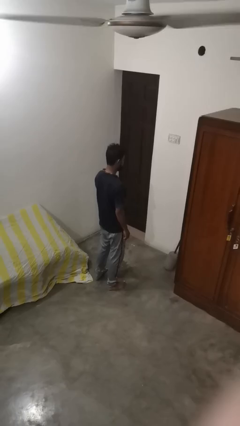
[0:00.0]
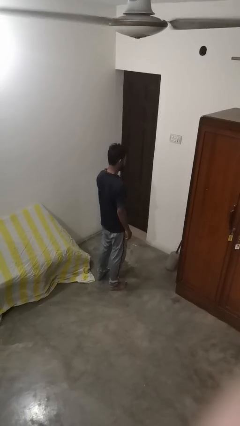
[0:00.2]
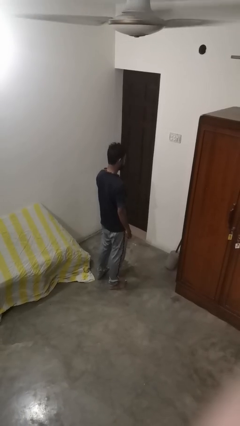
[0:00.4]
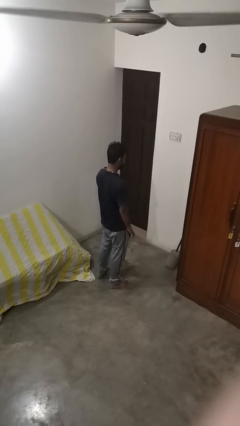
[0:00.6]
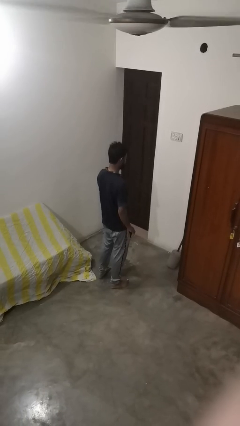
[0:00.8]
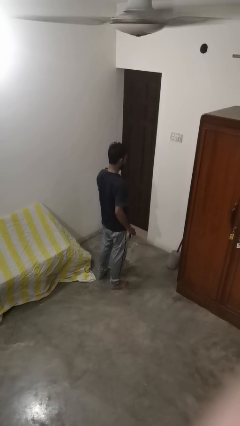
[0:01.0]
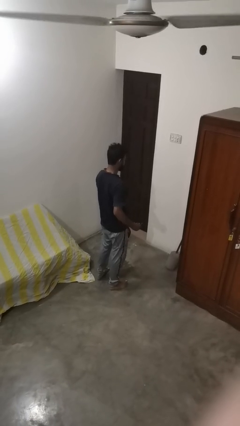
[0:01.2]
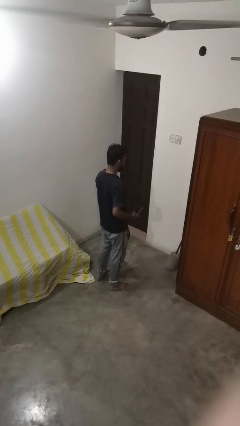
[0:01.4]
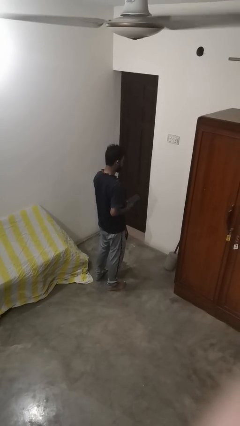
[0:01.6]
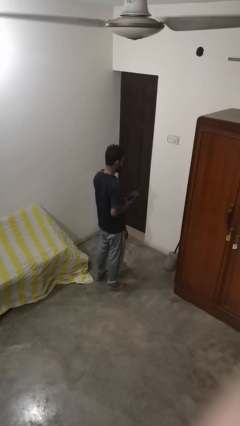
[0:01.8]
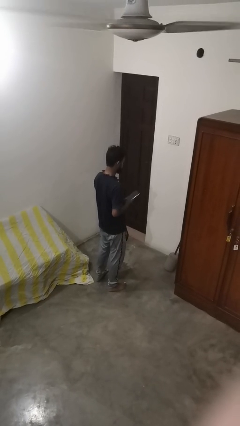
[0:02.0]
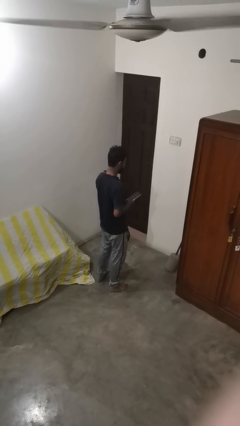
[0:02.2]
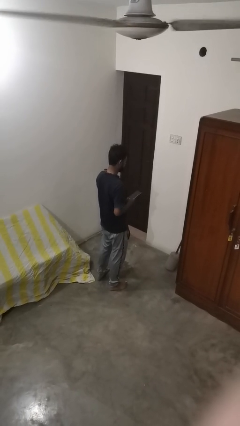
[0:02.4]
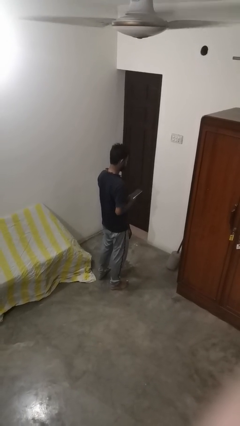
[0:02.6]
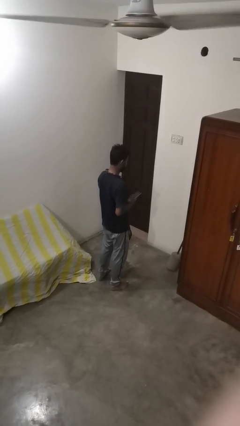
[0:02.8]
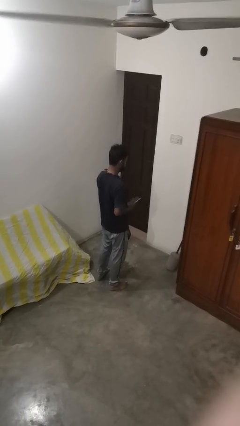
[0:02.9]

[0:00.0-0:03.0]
person takes phone from pocket

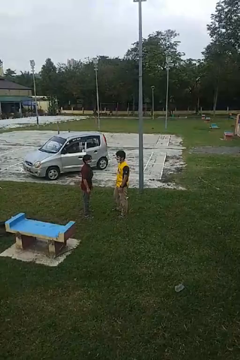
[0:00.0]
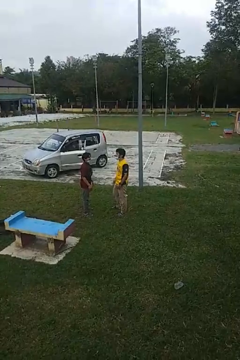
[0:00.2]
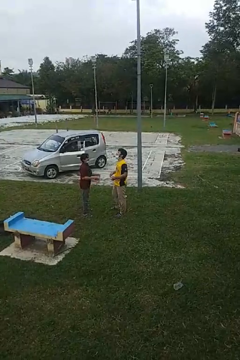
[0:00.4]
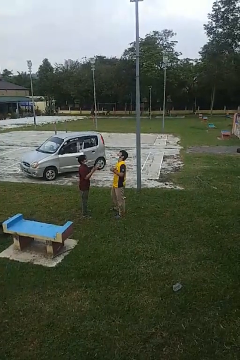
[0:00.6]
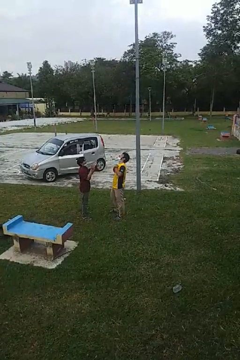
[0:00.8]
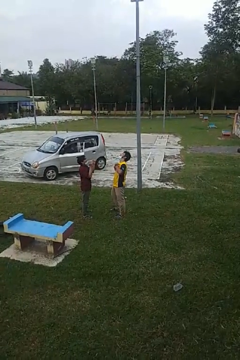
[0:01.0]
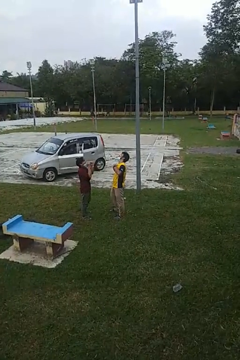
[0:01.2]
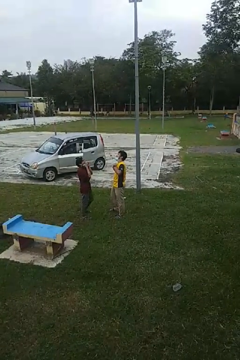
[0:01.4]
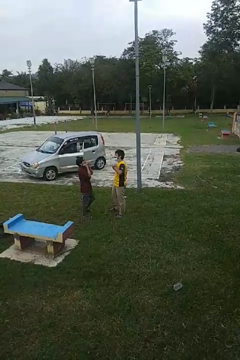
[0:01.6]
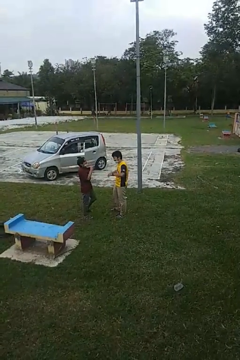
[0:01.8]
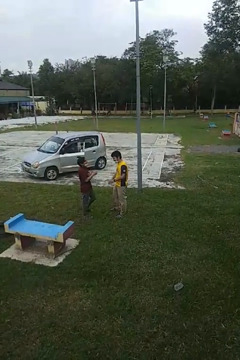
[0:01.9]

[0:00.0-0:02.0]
person laughs with person

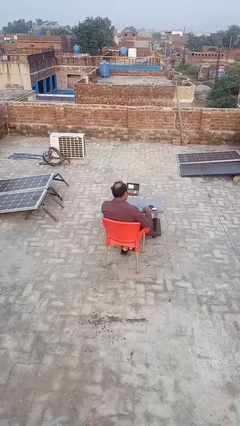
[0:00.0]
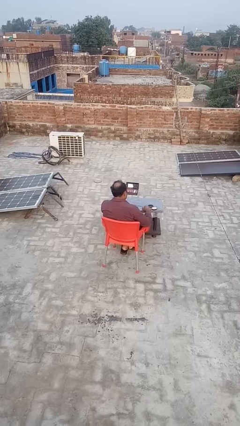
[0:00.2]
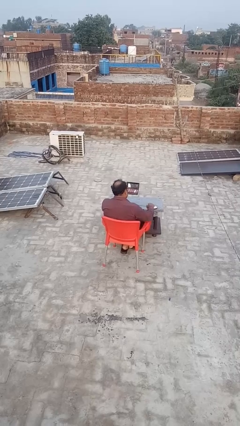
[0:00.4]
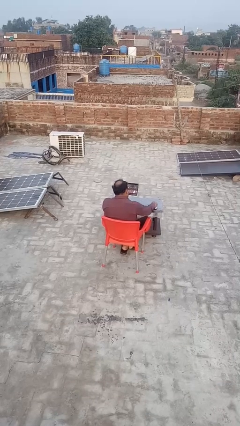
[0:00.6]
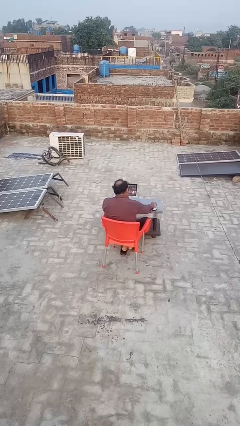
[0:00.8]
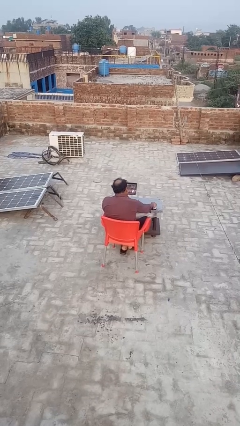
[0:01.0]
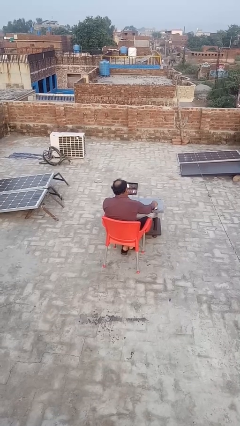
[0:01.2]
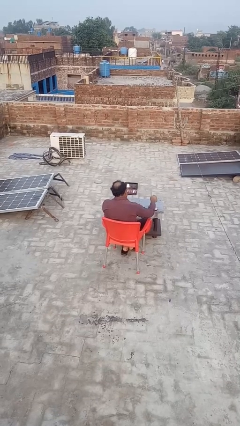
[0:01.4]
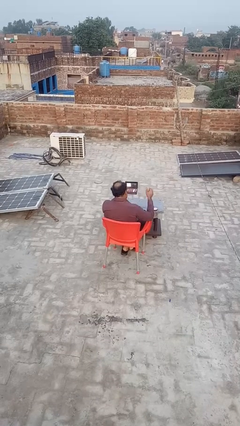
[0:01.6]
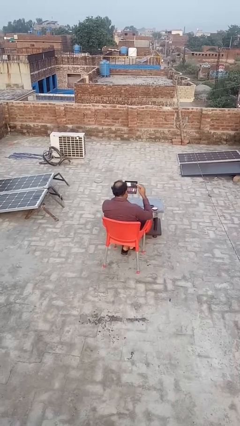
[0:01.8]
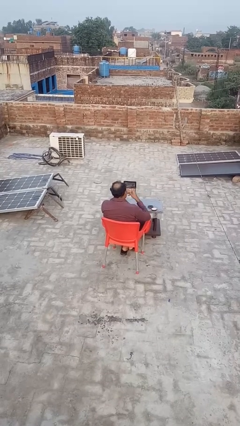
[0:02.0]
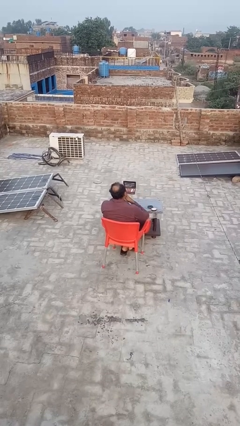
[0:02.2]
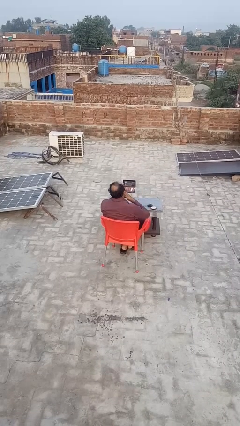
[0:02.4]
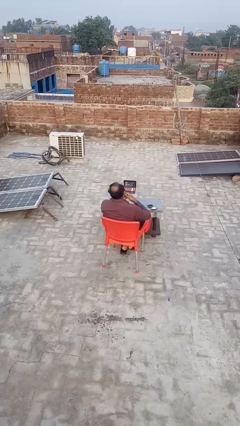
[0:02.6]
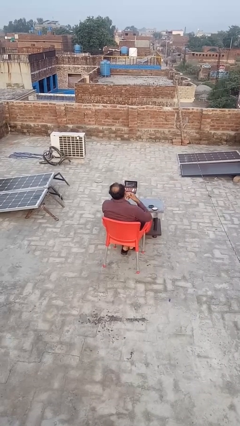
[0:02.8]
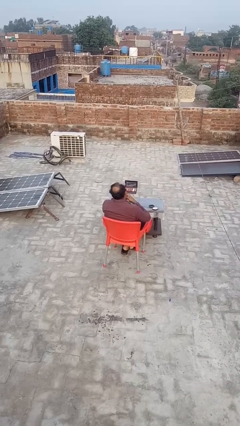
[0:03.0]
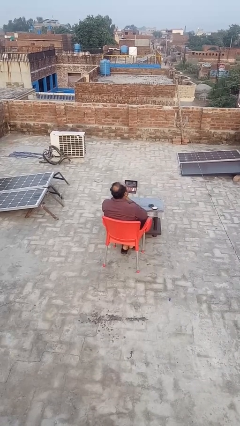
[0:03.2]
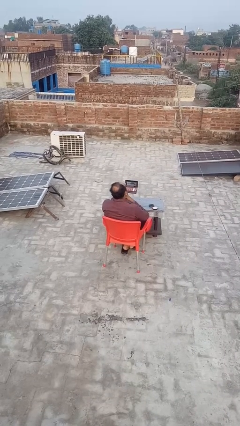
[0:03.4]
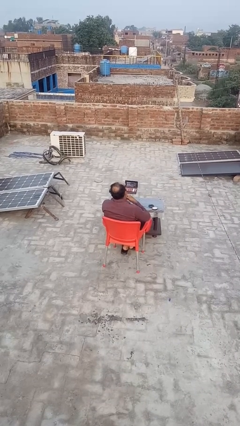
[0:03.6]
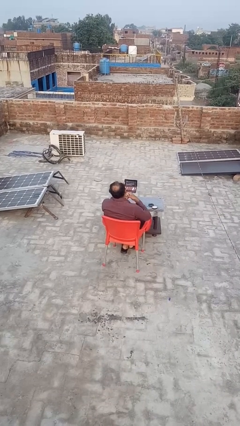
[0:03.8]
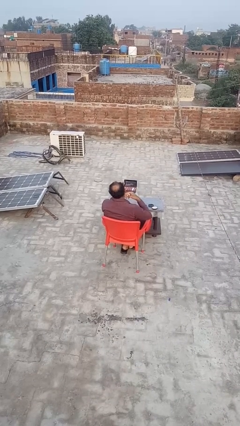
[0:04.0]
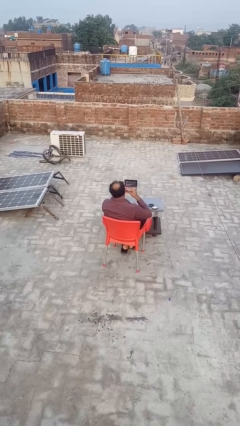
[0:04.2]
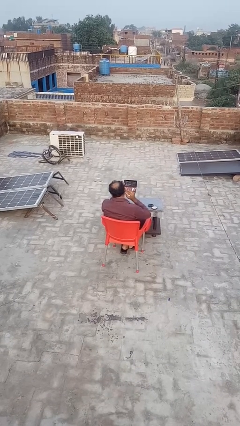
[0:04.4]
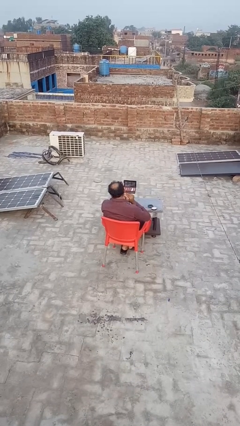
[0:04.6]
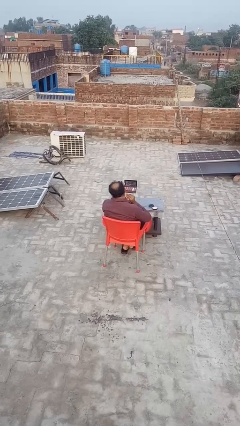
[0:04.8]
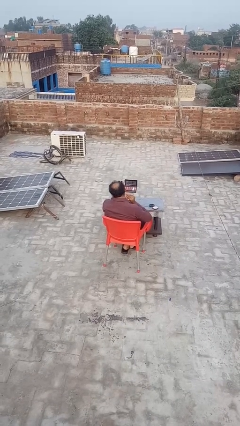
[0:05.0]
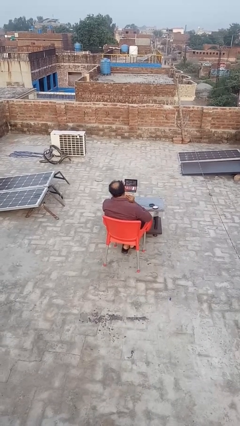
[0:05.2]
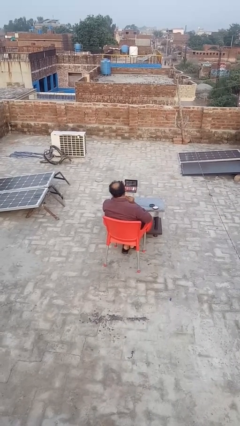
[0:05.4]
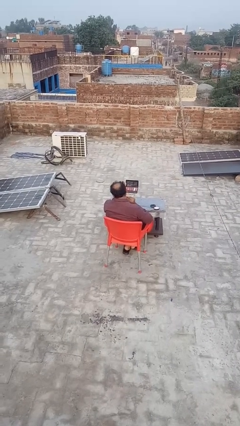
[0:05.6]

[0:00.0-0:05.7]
person applies foundation makeup

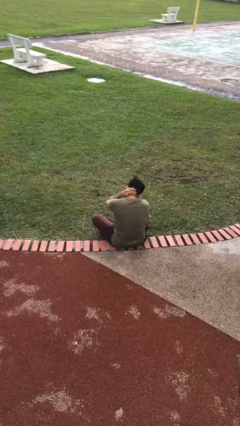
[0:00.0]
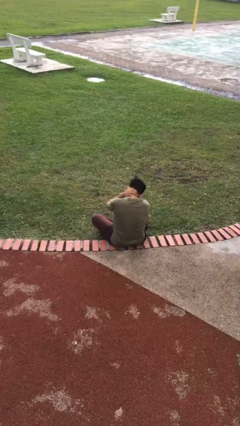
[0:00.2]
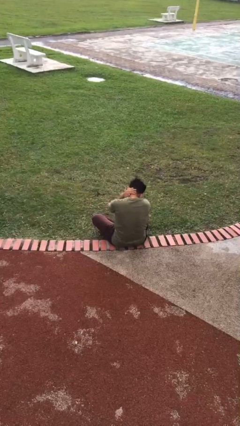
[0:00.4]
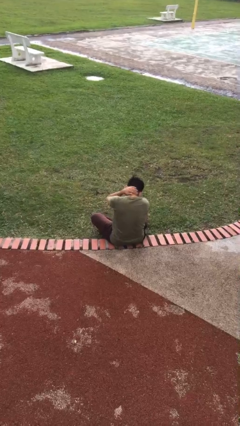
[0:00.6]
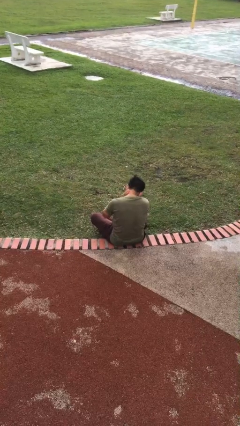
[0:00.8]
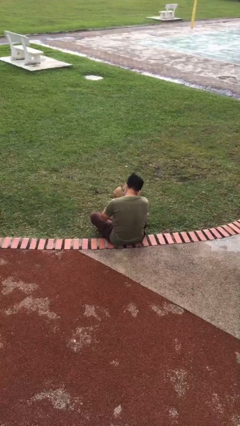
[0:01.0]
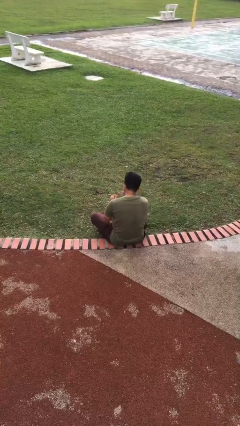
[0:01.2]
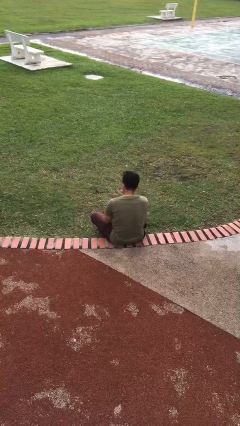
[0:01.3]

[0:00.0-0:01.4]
person rubs neck

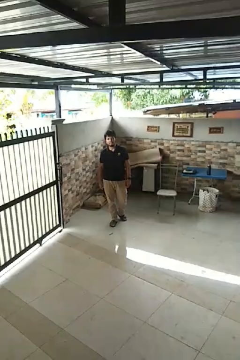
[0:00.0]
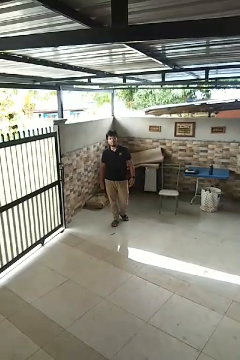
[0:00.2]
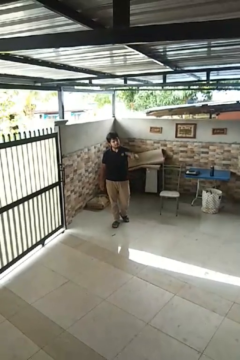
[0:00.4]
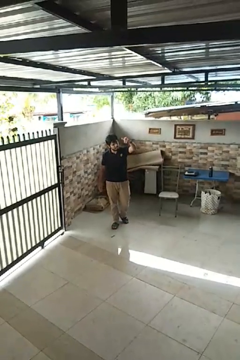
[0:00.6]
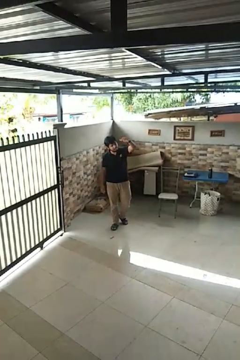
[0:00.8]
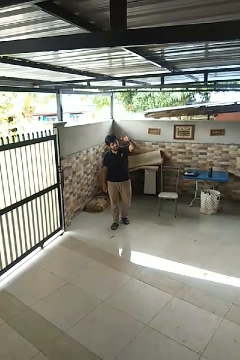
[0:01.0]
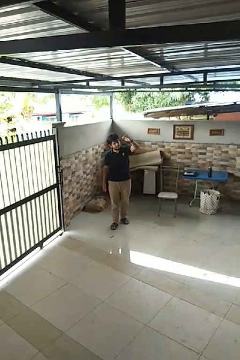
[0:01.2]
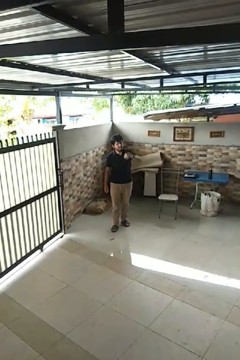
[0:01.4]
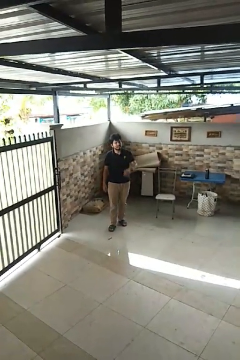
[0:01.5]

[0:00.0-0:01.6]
person gestures come here

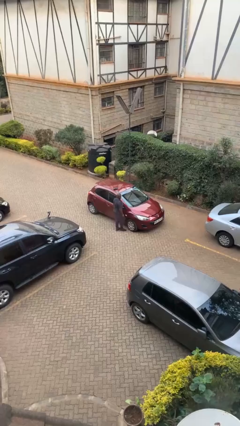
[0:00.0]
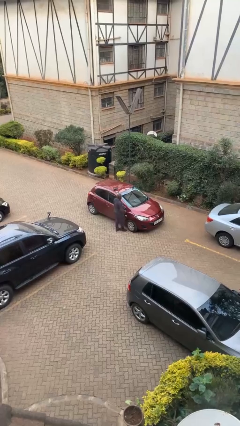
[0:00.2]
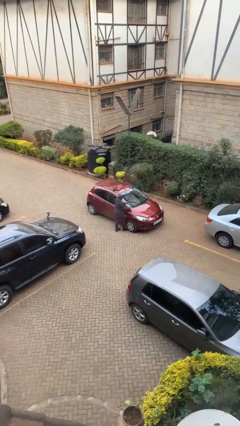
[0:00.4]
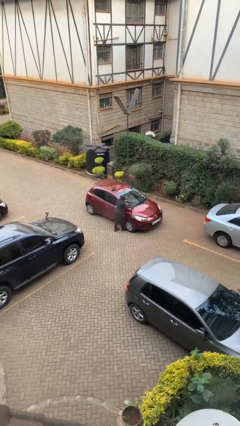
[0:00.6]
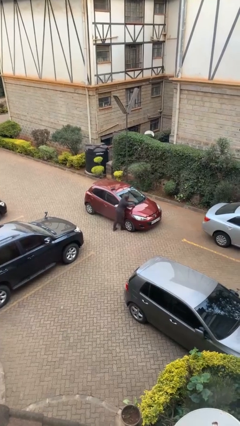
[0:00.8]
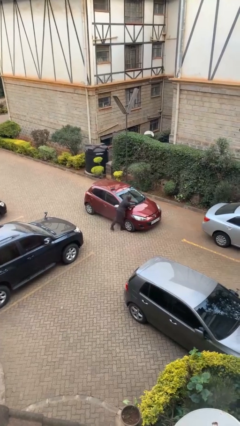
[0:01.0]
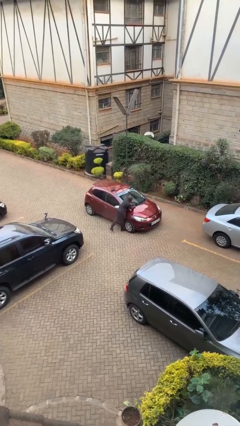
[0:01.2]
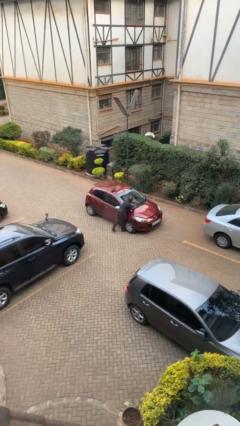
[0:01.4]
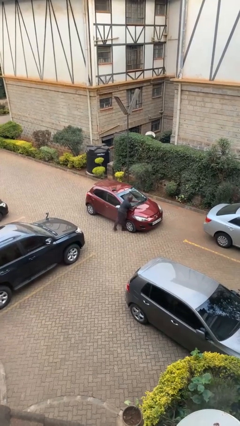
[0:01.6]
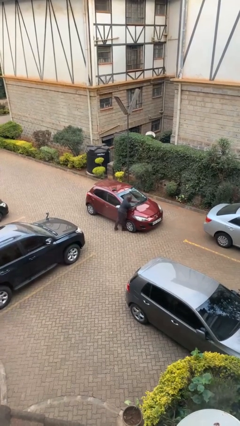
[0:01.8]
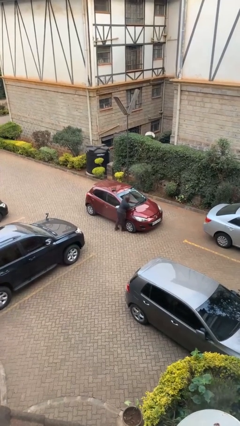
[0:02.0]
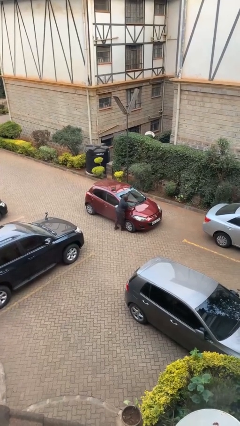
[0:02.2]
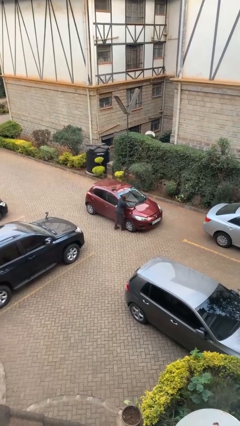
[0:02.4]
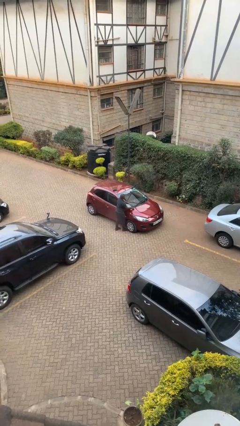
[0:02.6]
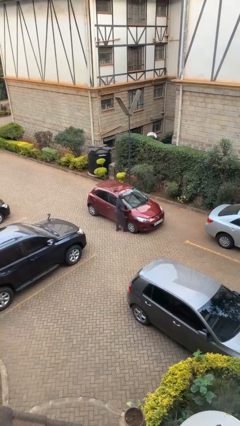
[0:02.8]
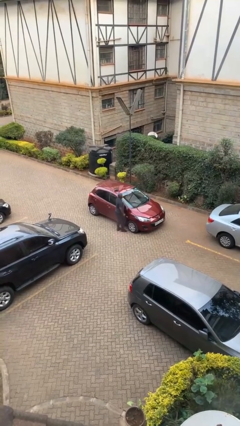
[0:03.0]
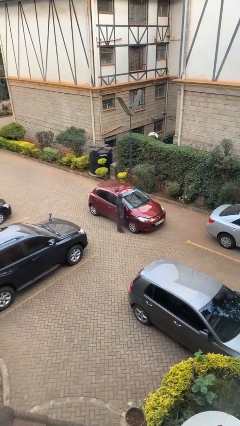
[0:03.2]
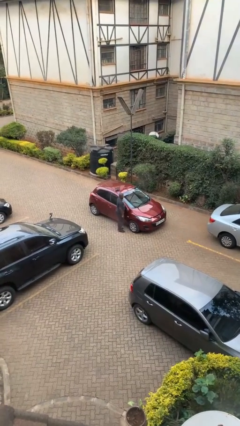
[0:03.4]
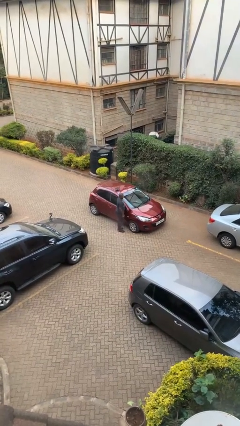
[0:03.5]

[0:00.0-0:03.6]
person flips up car wipers

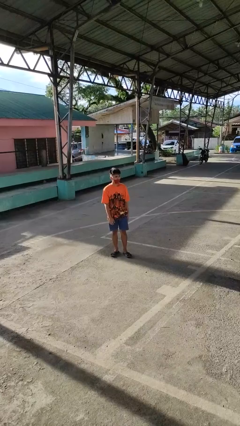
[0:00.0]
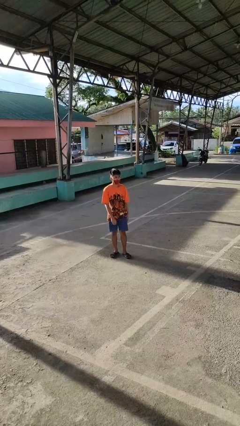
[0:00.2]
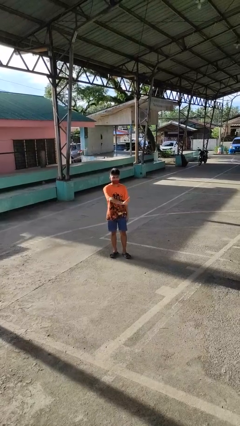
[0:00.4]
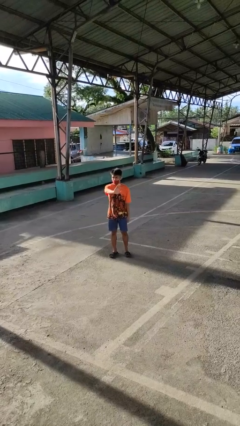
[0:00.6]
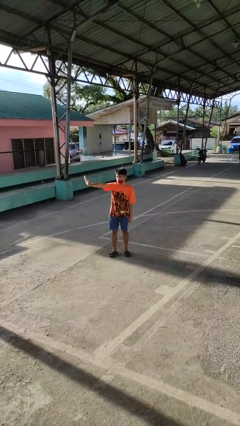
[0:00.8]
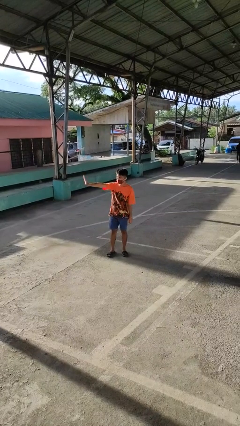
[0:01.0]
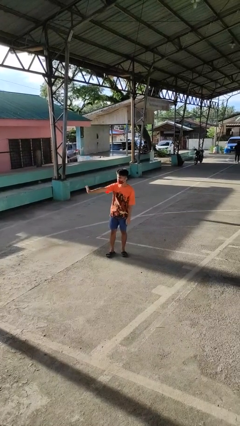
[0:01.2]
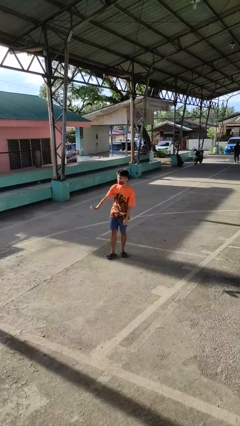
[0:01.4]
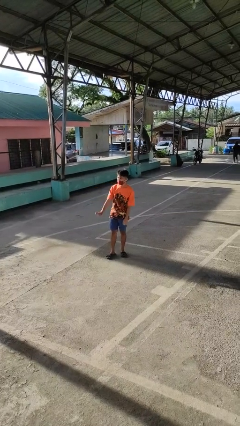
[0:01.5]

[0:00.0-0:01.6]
person gestures swipe right
